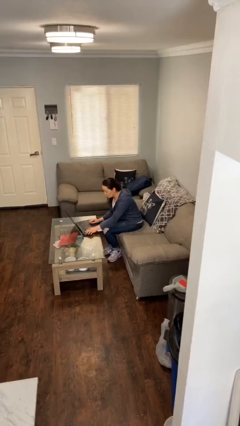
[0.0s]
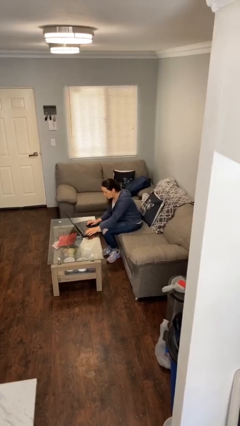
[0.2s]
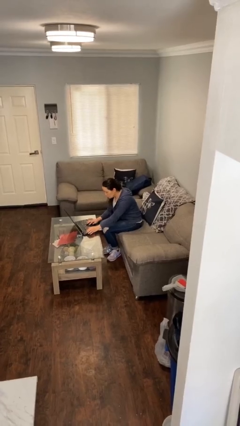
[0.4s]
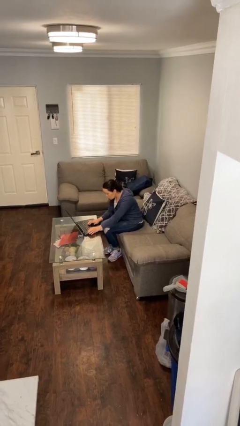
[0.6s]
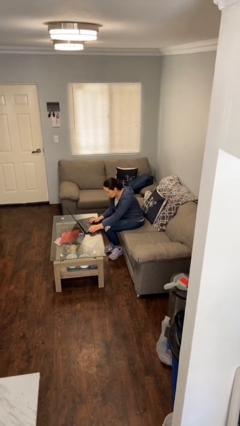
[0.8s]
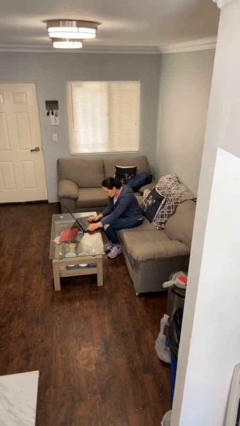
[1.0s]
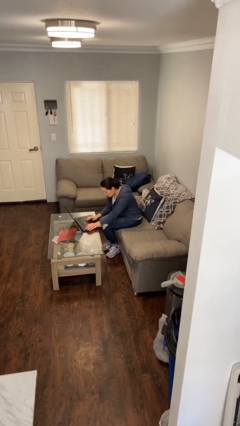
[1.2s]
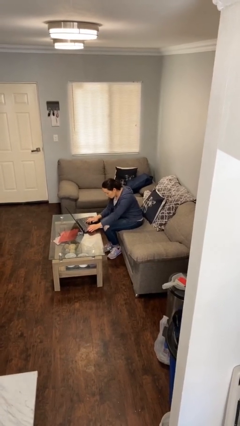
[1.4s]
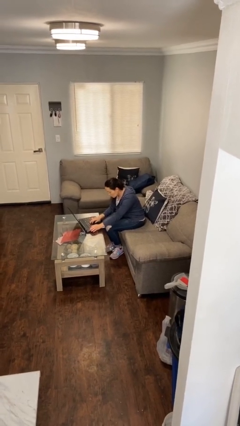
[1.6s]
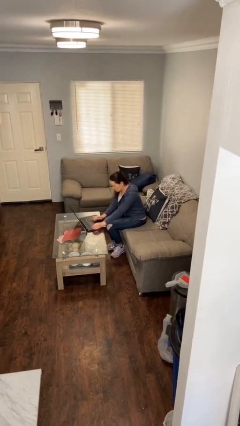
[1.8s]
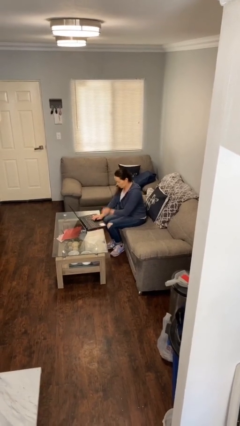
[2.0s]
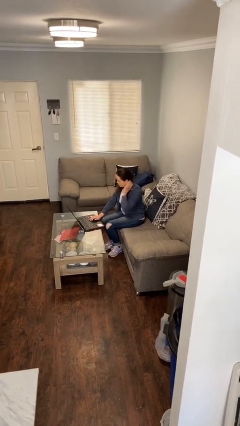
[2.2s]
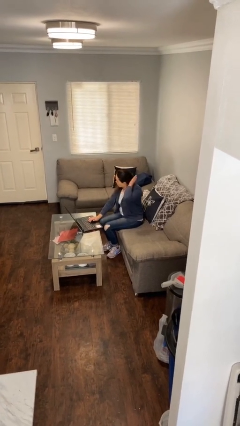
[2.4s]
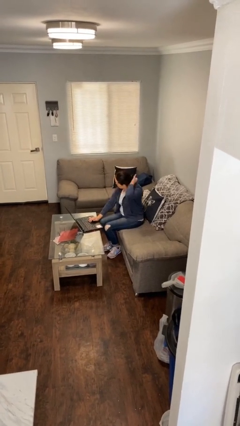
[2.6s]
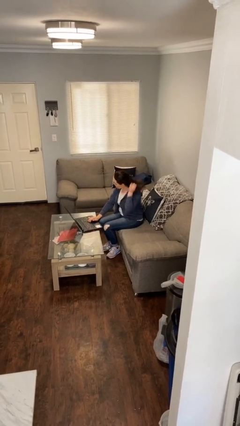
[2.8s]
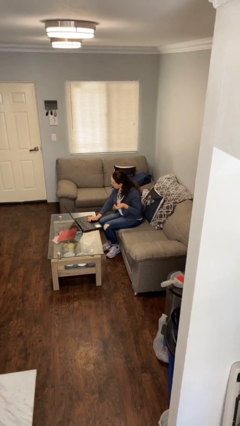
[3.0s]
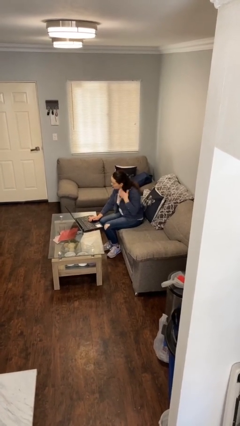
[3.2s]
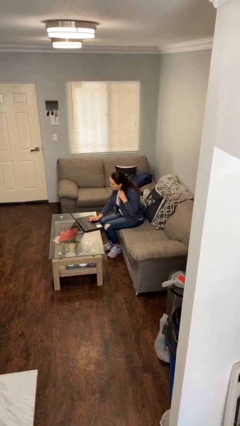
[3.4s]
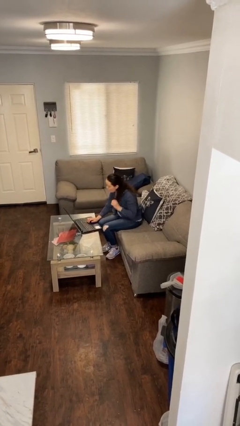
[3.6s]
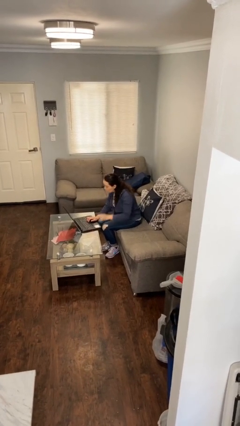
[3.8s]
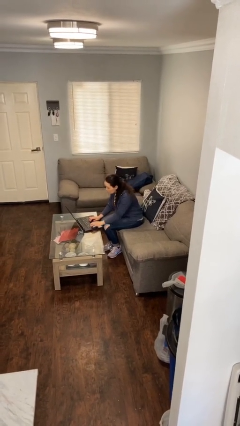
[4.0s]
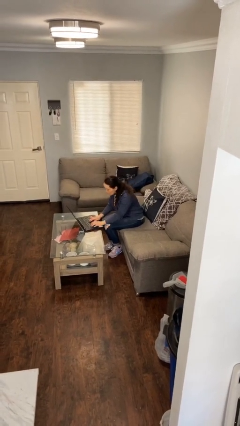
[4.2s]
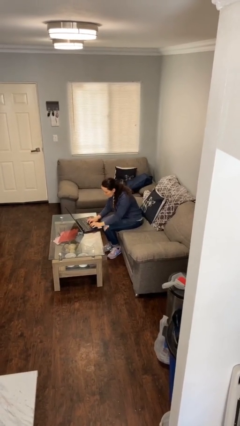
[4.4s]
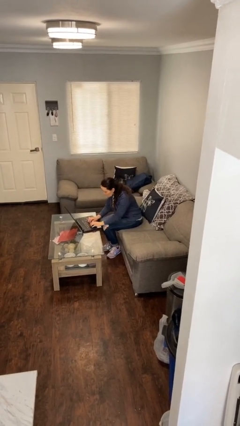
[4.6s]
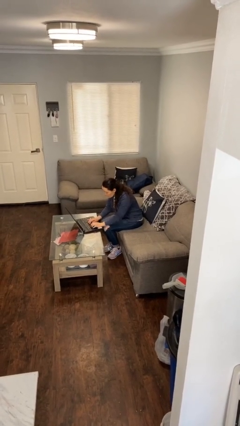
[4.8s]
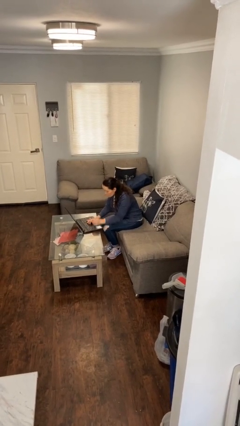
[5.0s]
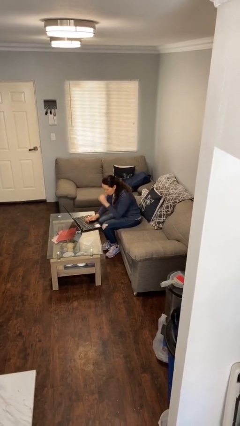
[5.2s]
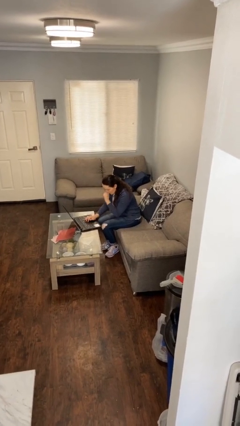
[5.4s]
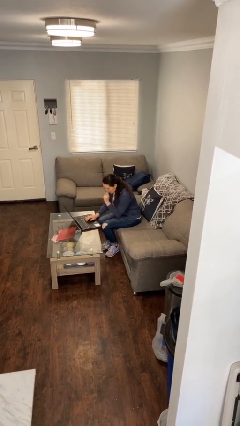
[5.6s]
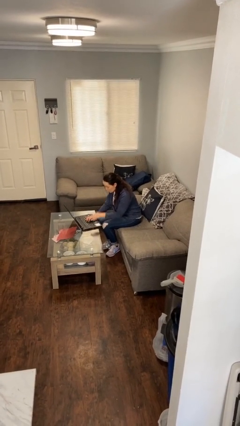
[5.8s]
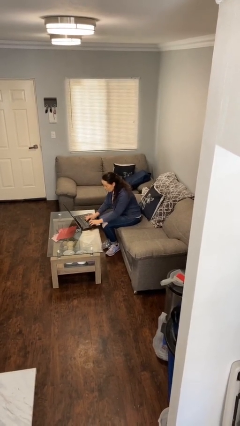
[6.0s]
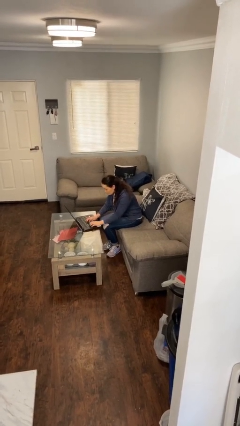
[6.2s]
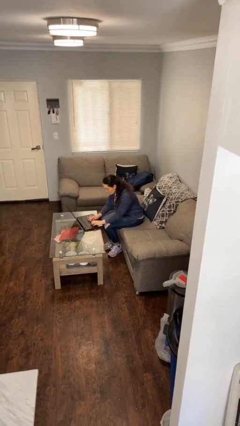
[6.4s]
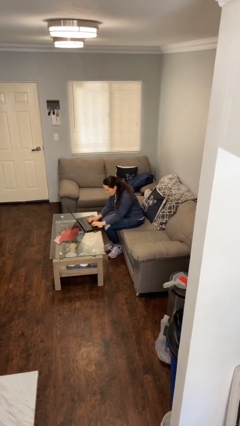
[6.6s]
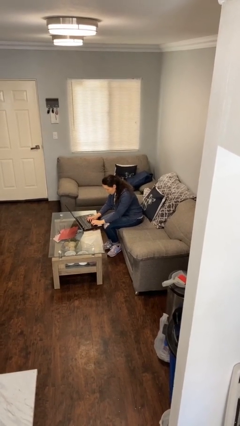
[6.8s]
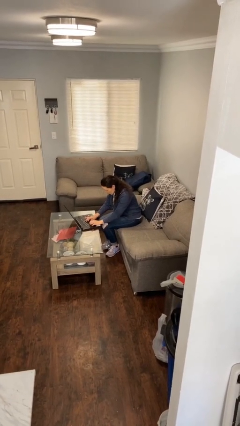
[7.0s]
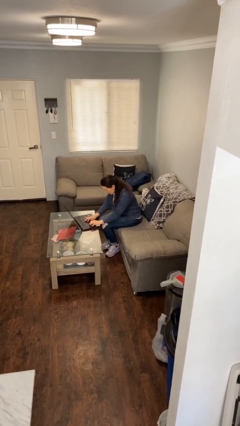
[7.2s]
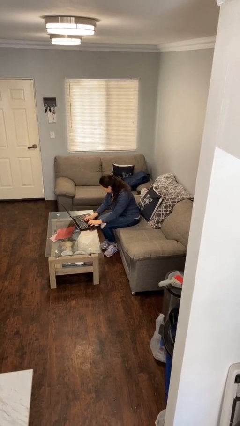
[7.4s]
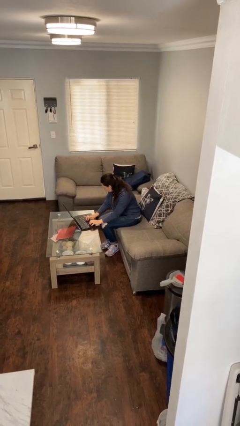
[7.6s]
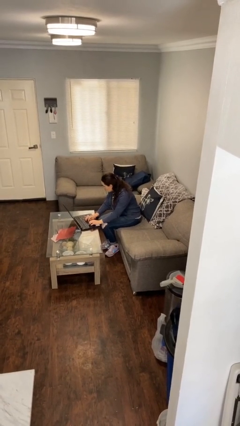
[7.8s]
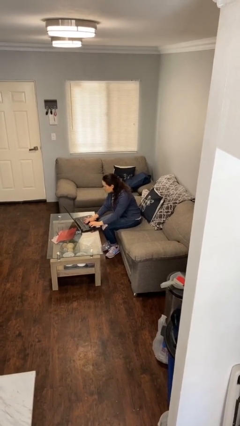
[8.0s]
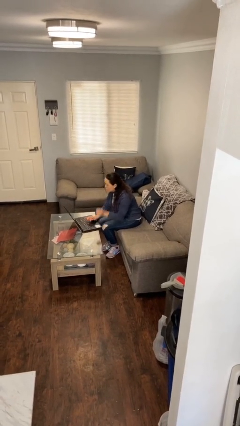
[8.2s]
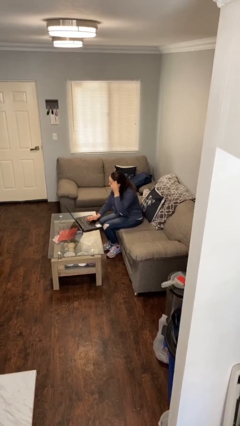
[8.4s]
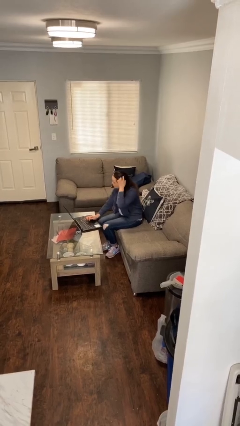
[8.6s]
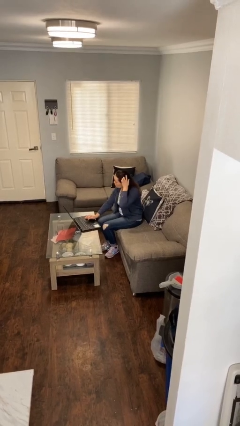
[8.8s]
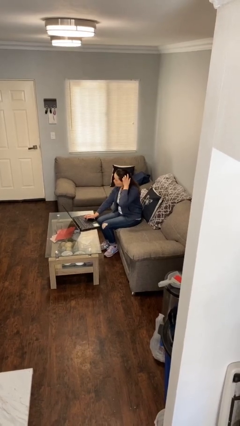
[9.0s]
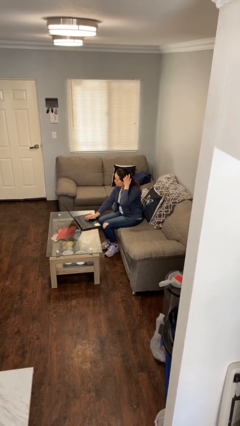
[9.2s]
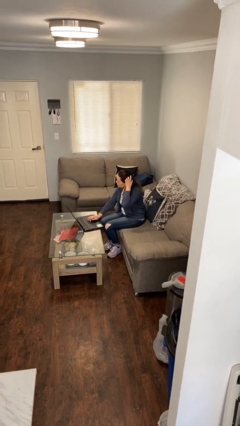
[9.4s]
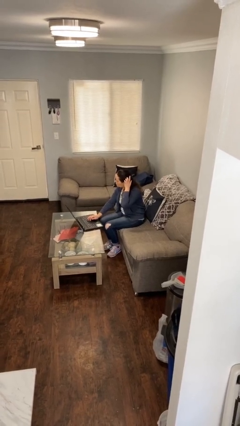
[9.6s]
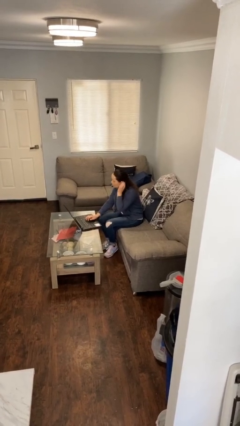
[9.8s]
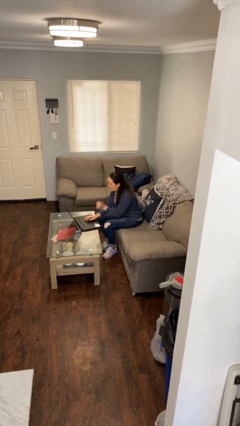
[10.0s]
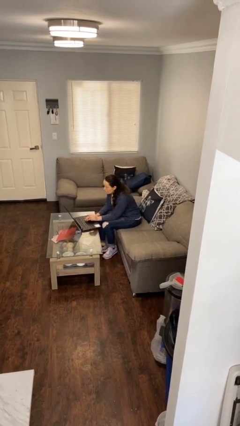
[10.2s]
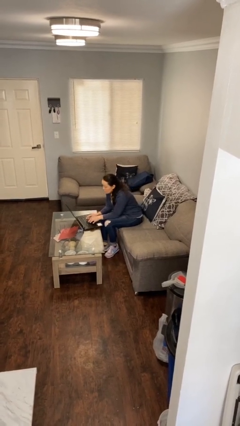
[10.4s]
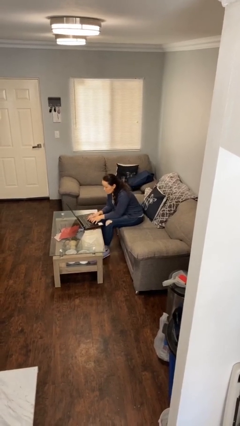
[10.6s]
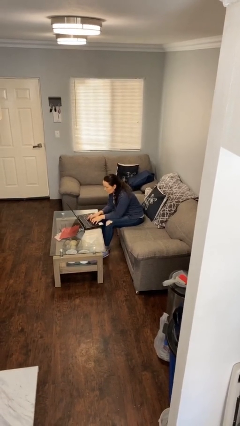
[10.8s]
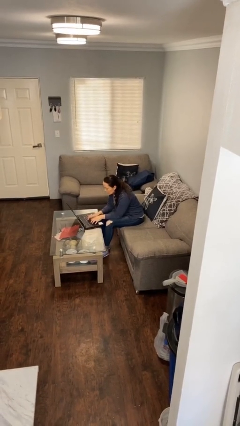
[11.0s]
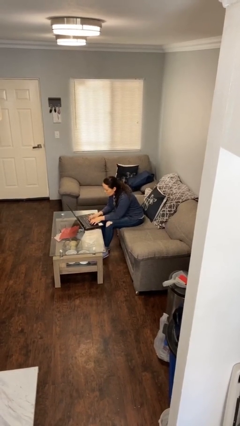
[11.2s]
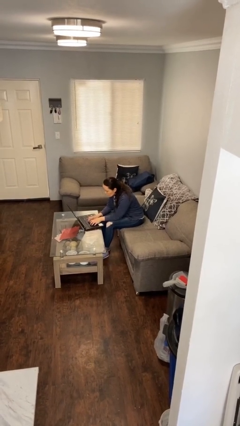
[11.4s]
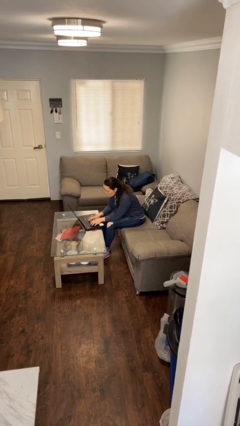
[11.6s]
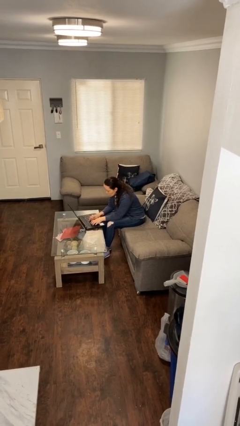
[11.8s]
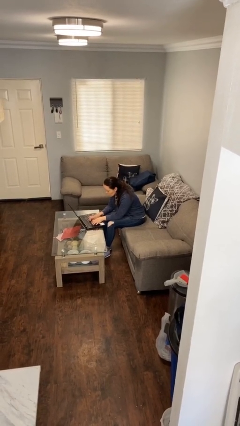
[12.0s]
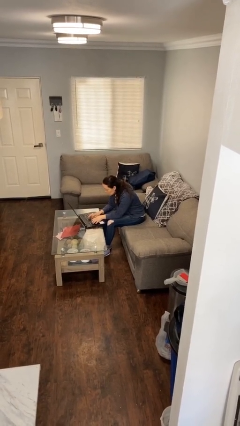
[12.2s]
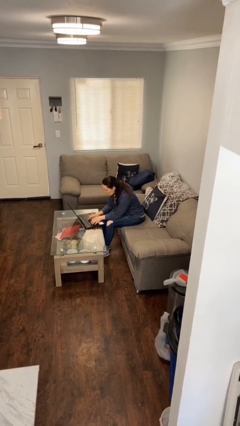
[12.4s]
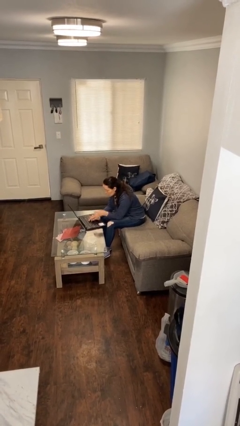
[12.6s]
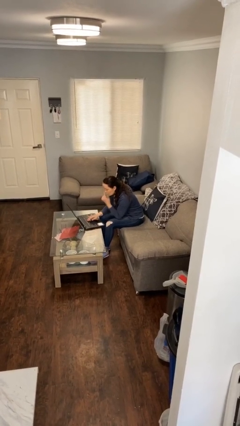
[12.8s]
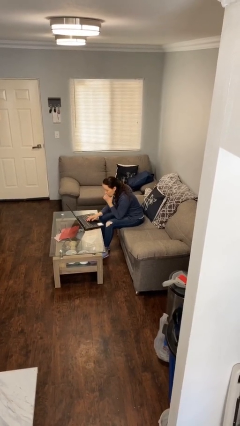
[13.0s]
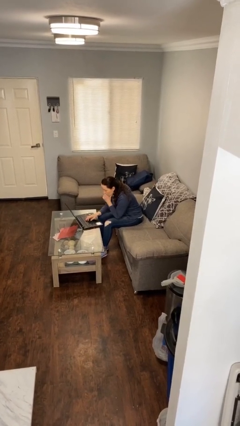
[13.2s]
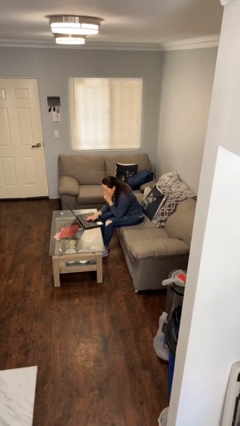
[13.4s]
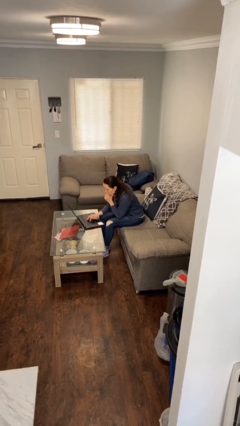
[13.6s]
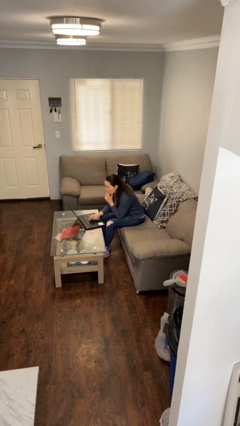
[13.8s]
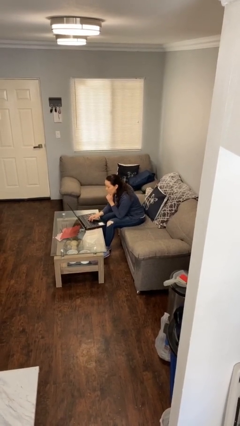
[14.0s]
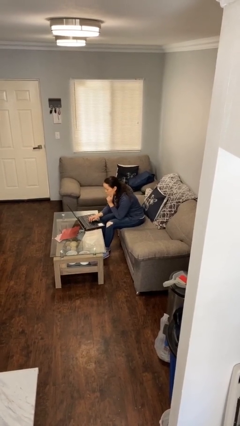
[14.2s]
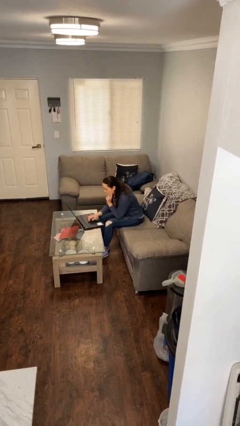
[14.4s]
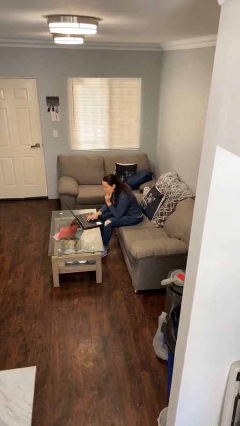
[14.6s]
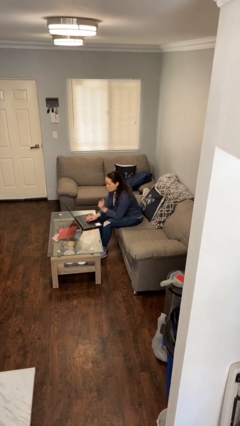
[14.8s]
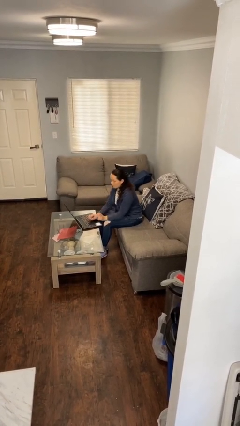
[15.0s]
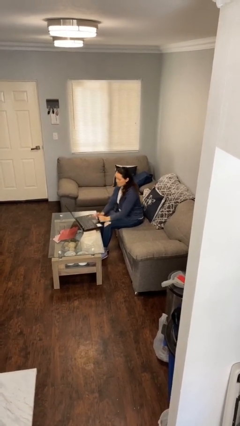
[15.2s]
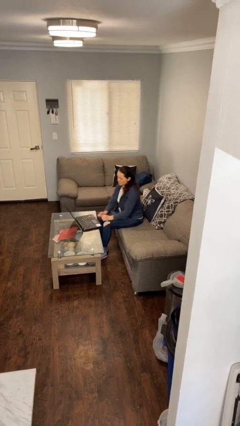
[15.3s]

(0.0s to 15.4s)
person interacts with laptop

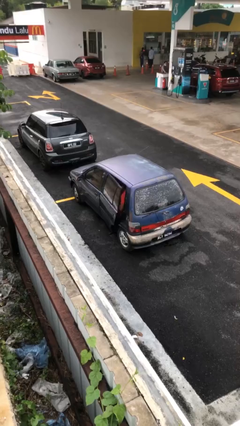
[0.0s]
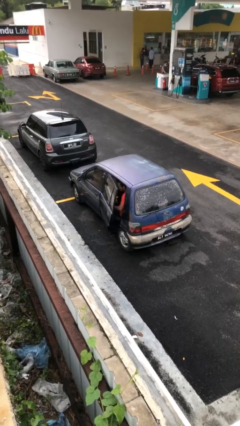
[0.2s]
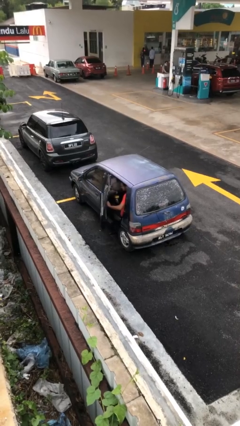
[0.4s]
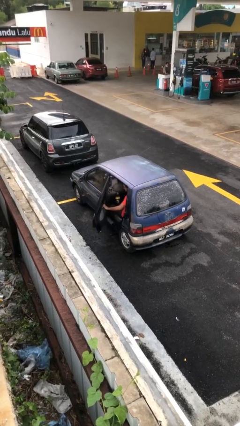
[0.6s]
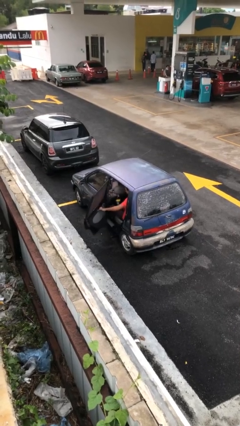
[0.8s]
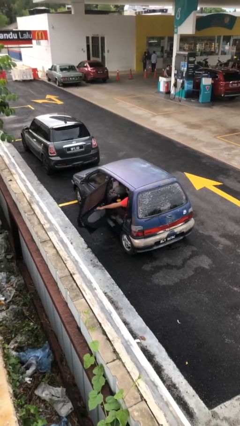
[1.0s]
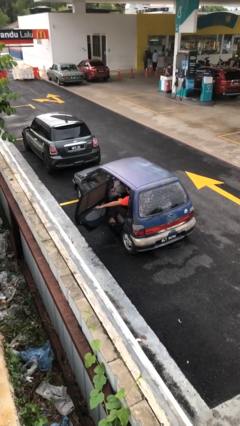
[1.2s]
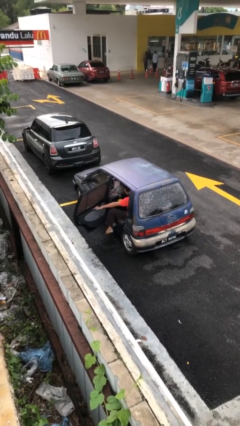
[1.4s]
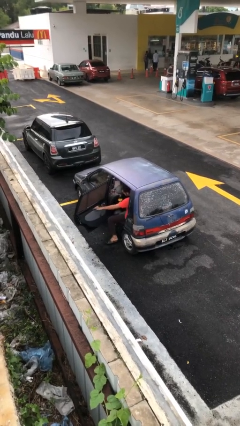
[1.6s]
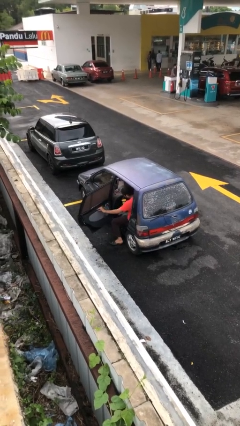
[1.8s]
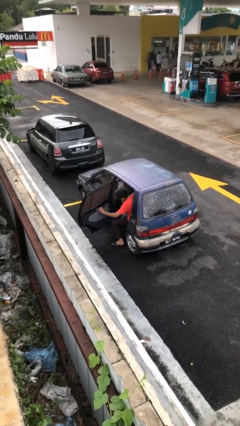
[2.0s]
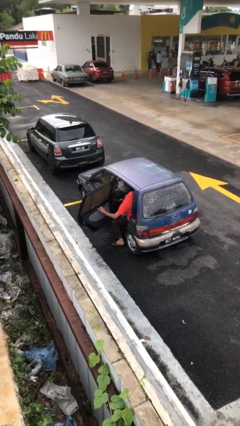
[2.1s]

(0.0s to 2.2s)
person opens car door

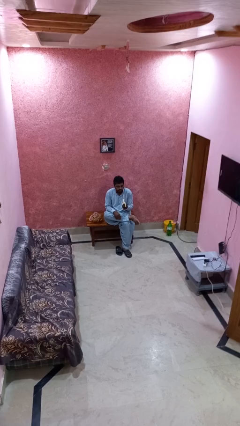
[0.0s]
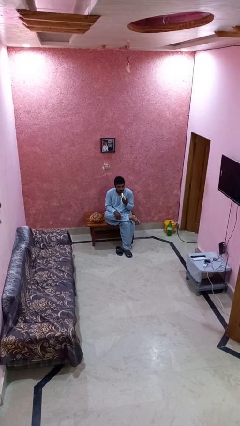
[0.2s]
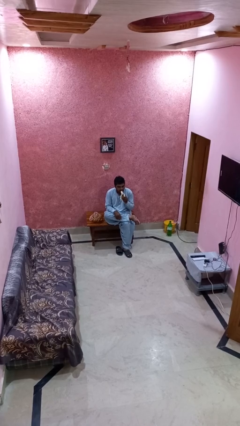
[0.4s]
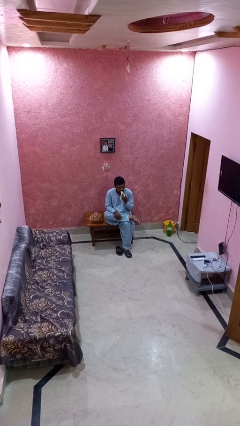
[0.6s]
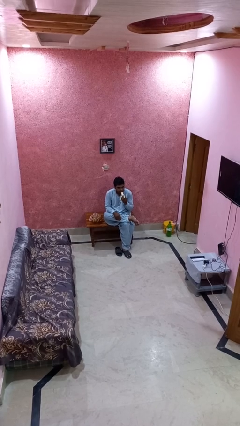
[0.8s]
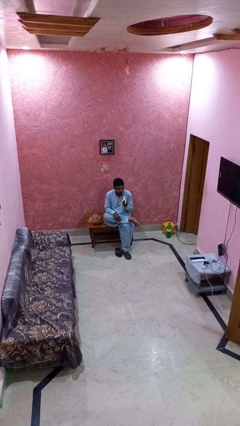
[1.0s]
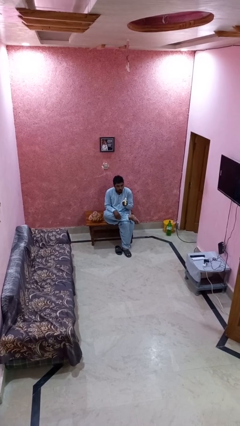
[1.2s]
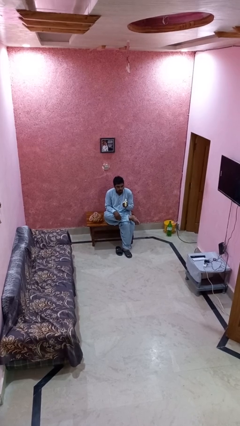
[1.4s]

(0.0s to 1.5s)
person eats banana
